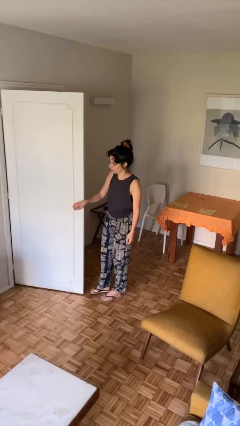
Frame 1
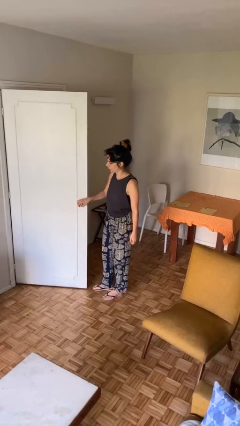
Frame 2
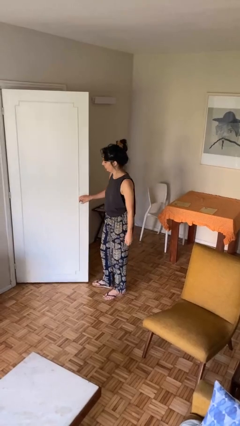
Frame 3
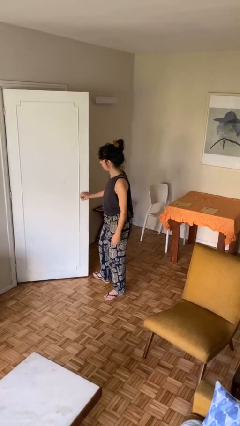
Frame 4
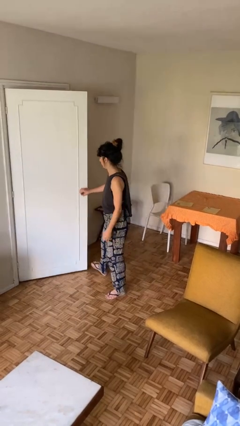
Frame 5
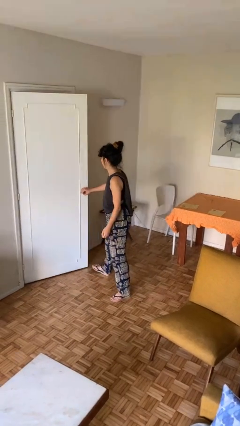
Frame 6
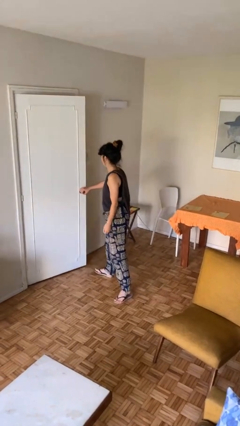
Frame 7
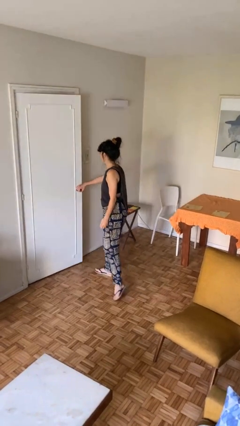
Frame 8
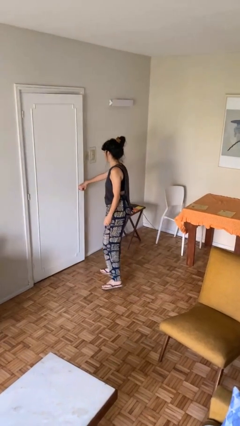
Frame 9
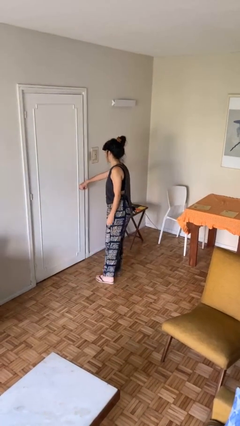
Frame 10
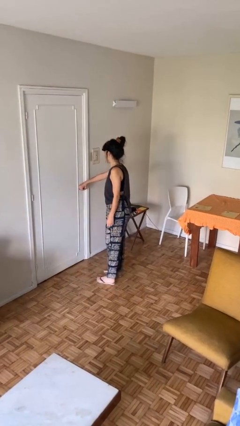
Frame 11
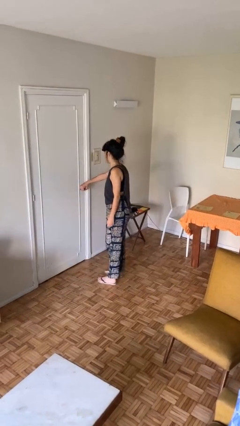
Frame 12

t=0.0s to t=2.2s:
person closes facility door

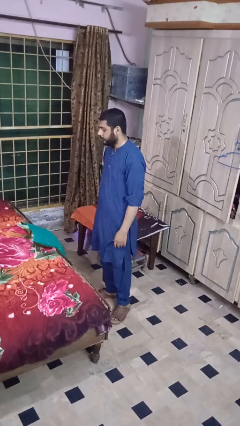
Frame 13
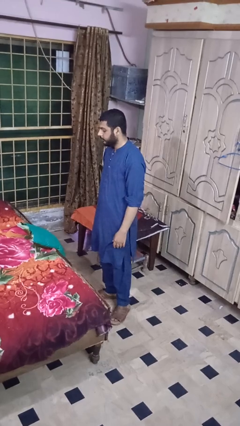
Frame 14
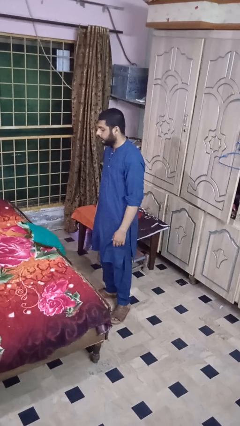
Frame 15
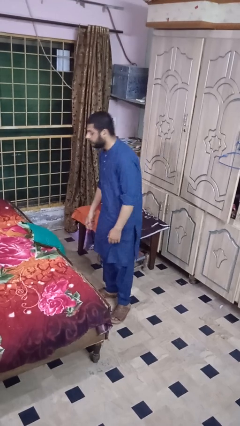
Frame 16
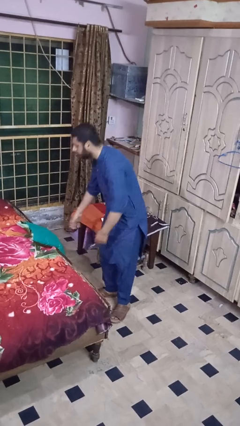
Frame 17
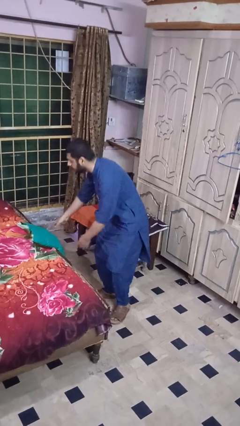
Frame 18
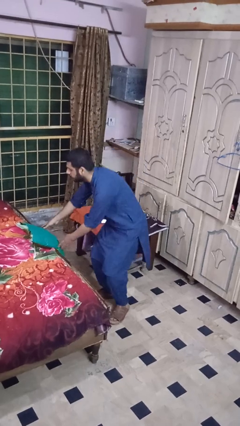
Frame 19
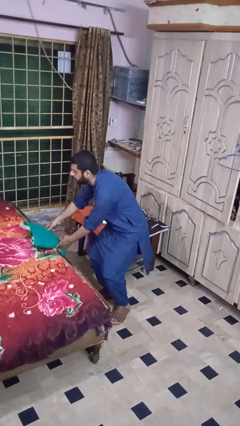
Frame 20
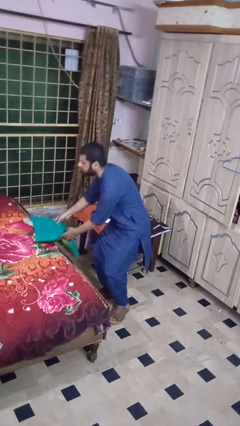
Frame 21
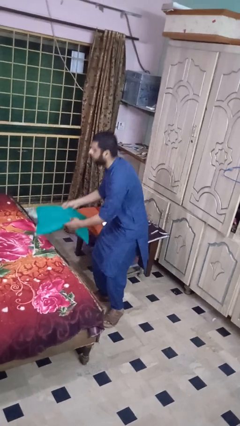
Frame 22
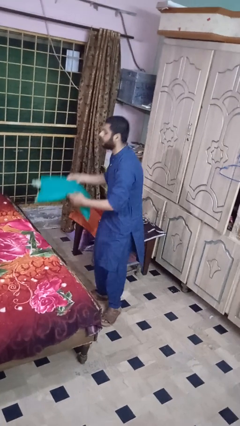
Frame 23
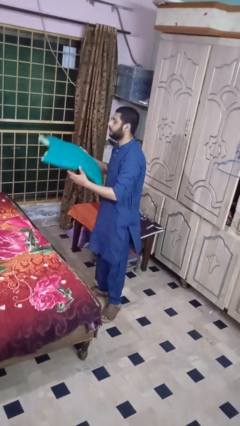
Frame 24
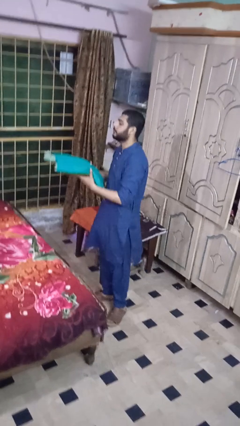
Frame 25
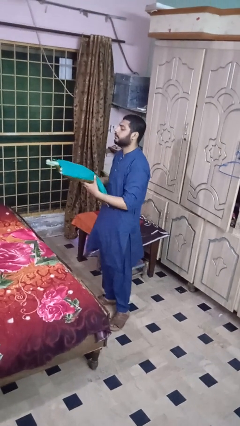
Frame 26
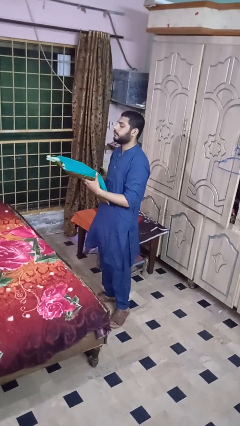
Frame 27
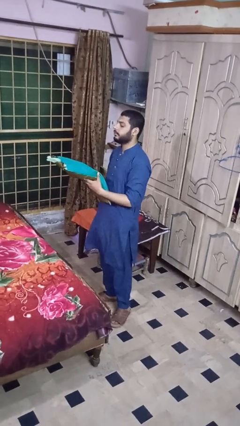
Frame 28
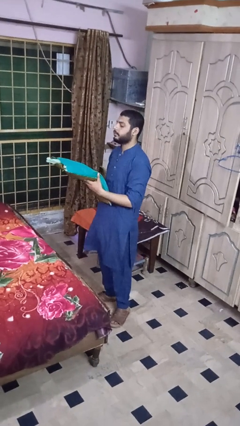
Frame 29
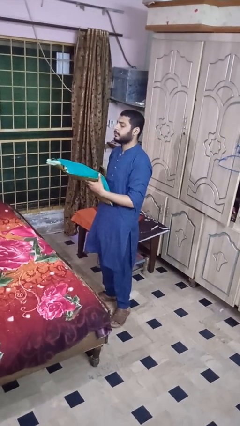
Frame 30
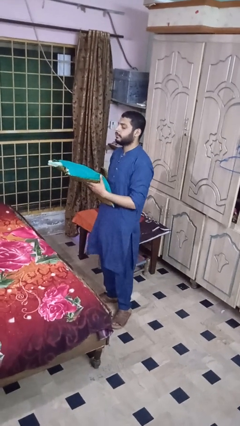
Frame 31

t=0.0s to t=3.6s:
person picks up object from bed

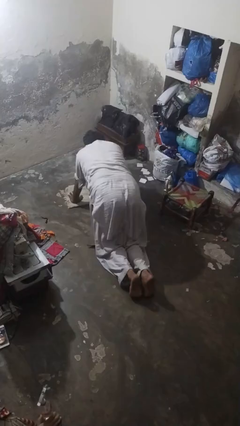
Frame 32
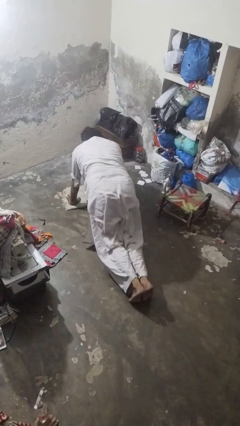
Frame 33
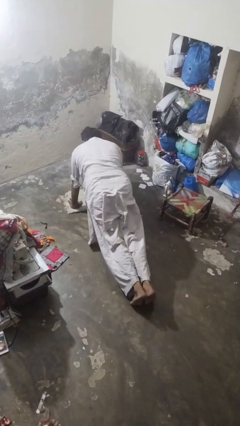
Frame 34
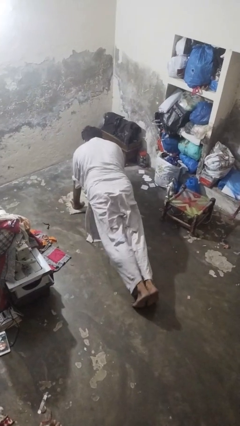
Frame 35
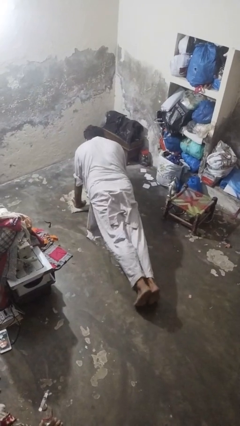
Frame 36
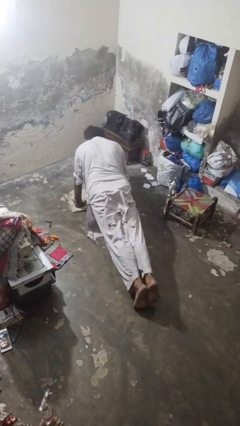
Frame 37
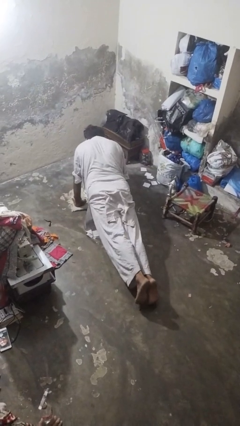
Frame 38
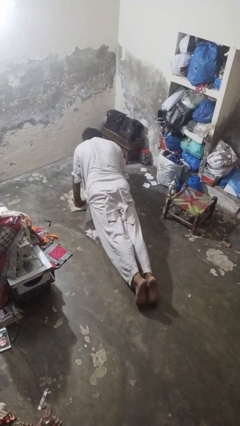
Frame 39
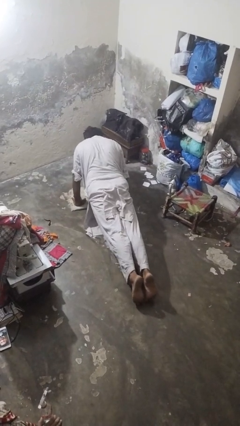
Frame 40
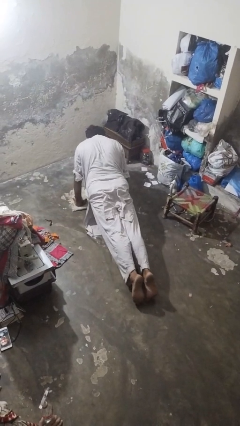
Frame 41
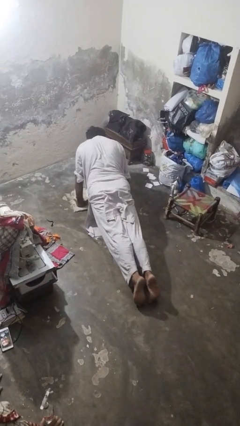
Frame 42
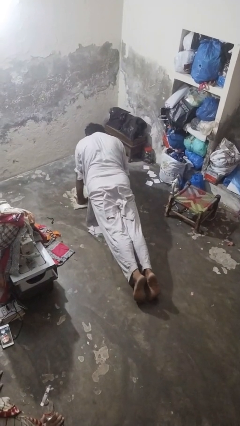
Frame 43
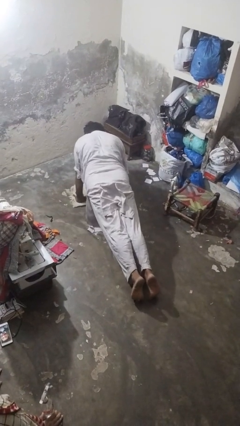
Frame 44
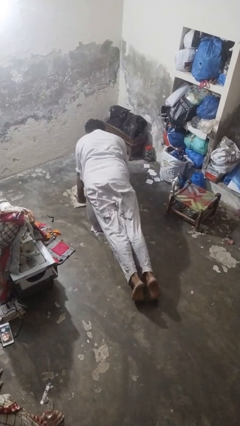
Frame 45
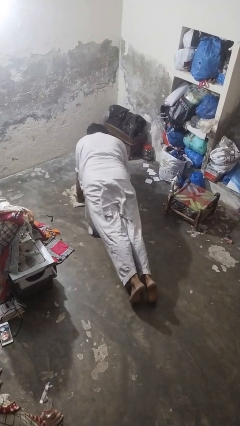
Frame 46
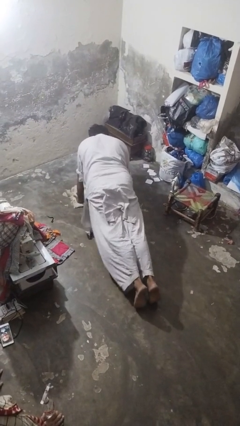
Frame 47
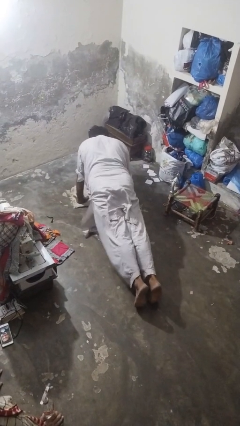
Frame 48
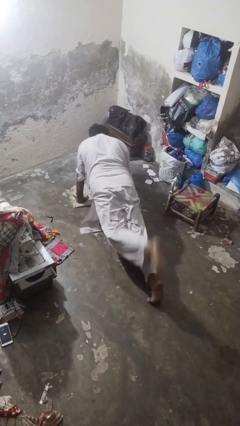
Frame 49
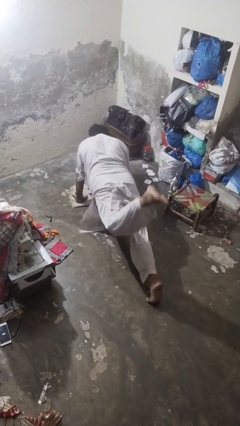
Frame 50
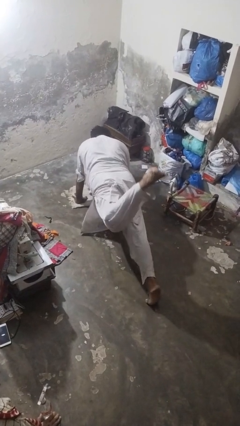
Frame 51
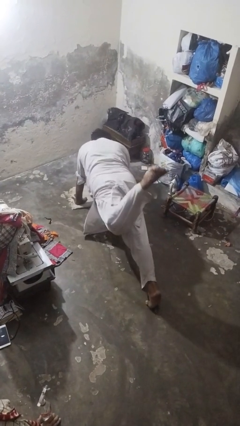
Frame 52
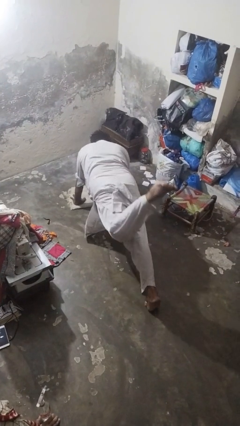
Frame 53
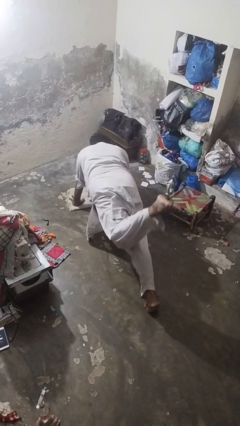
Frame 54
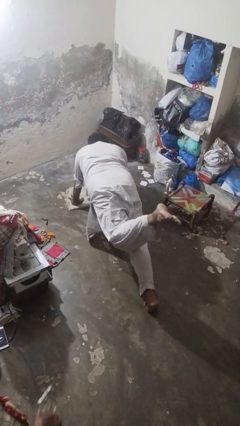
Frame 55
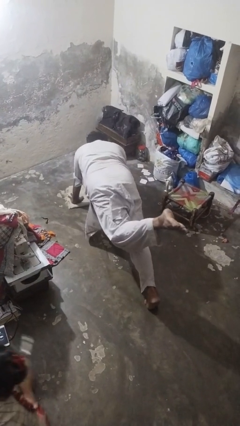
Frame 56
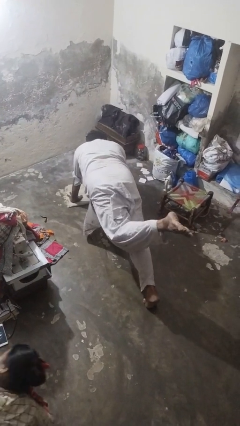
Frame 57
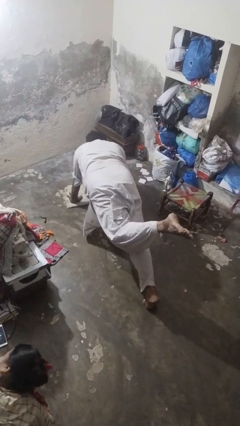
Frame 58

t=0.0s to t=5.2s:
person handstand

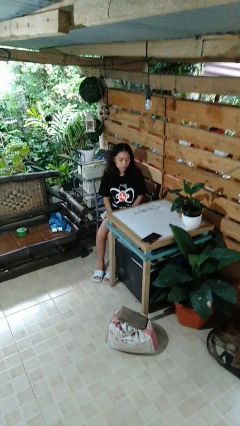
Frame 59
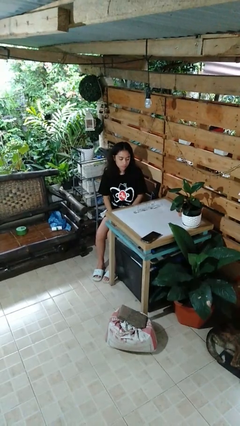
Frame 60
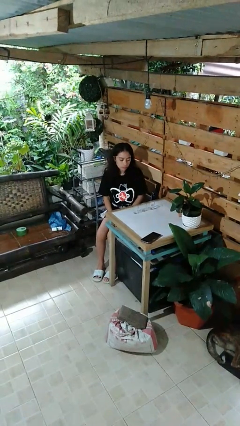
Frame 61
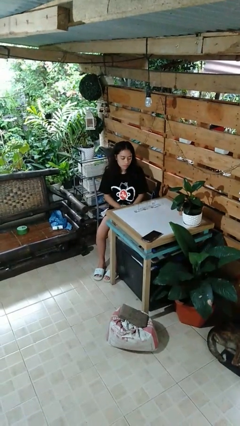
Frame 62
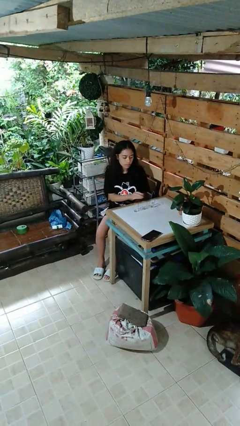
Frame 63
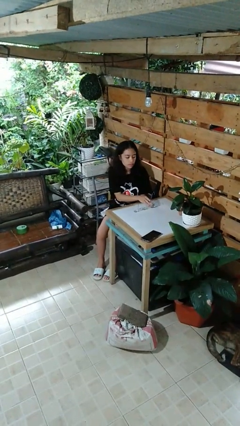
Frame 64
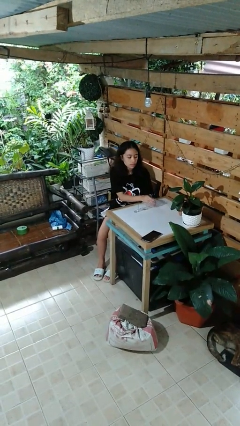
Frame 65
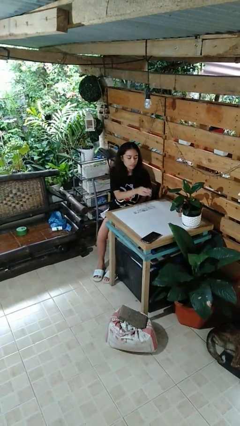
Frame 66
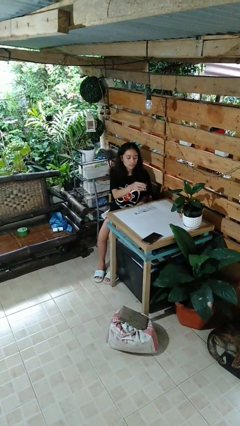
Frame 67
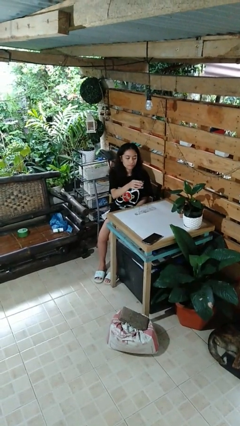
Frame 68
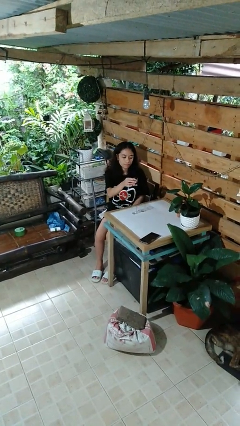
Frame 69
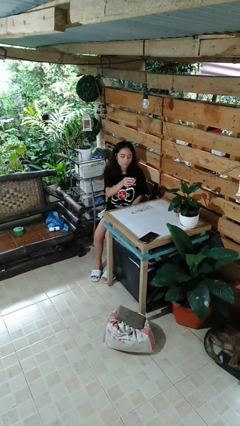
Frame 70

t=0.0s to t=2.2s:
person picks up object from table

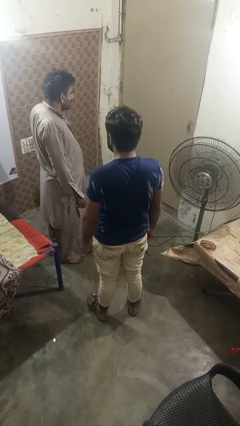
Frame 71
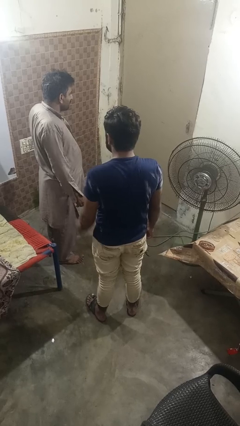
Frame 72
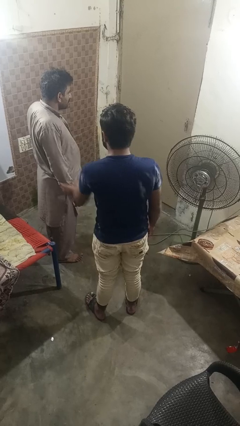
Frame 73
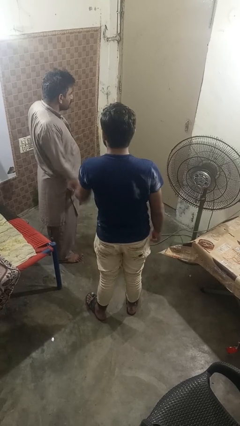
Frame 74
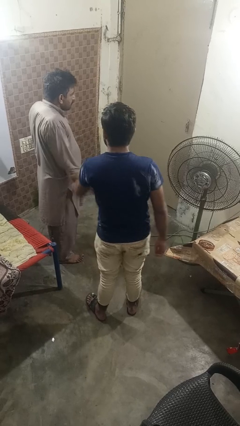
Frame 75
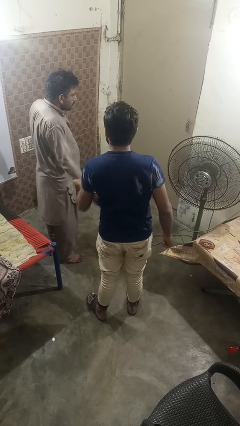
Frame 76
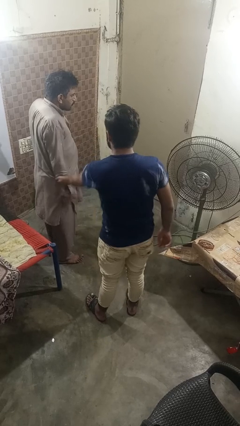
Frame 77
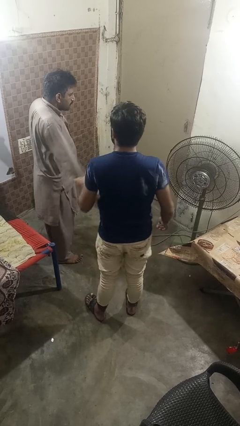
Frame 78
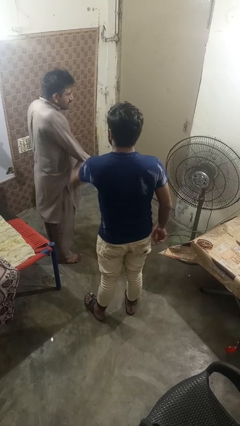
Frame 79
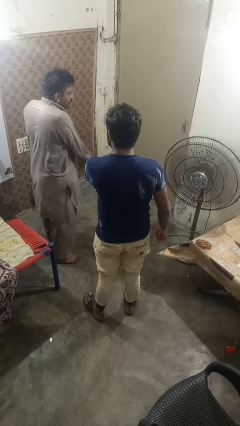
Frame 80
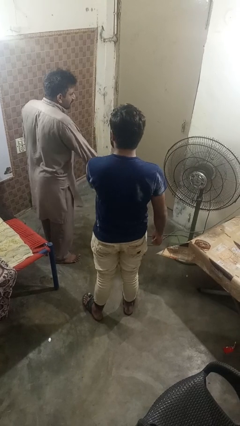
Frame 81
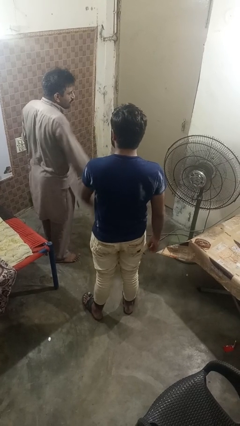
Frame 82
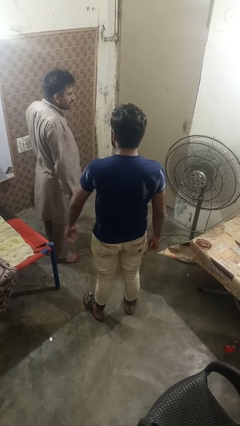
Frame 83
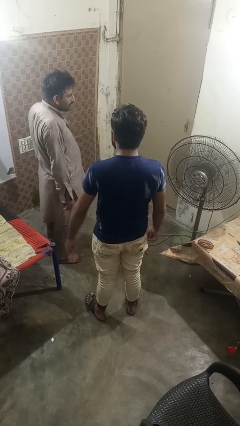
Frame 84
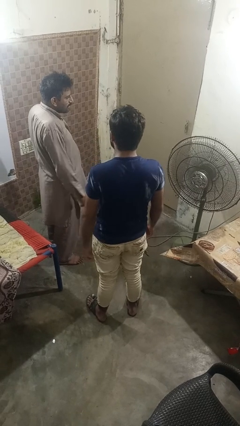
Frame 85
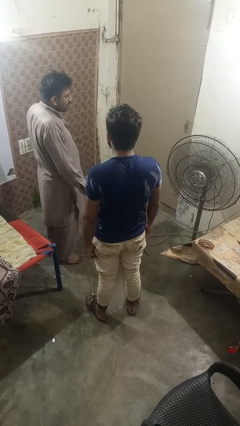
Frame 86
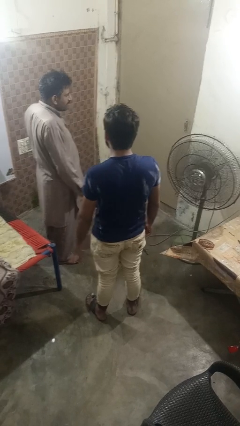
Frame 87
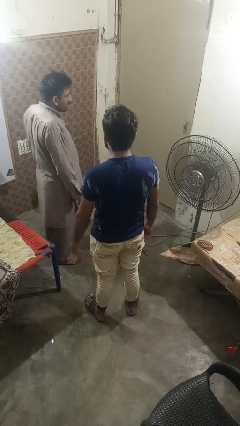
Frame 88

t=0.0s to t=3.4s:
person grabs person by forearm

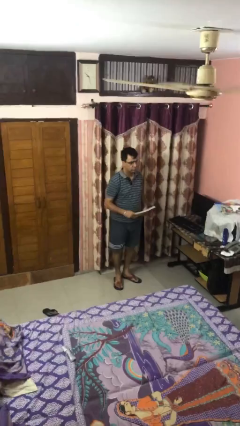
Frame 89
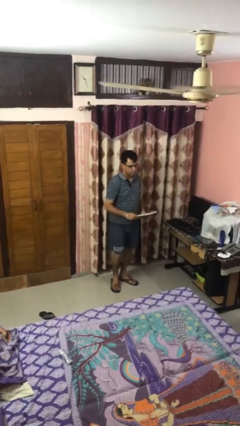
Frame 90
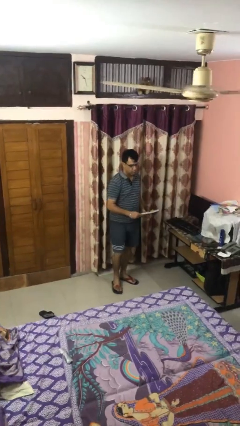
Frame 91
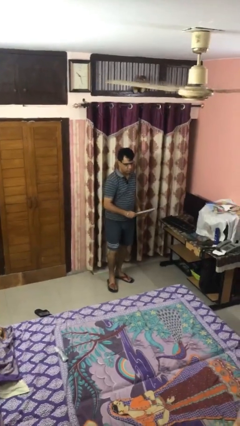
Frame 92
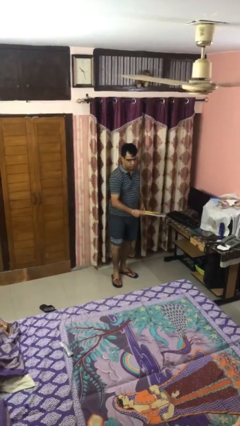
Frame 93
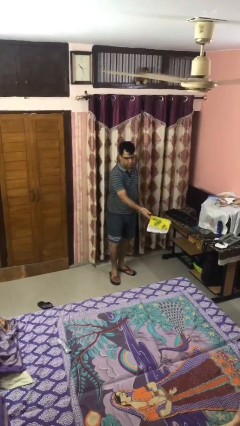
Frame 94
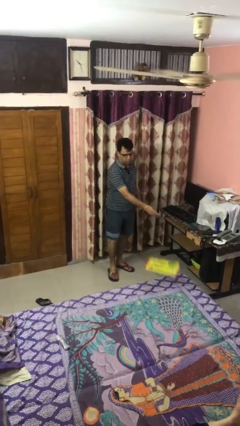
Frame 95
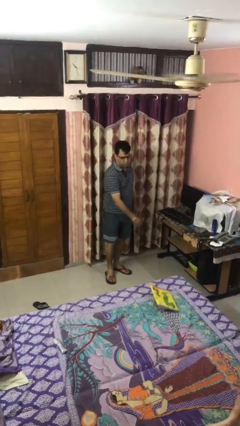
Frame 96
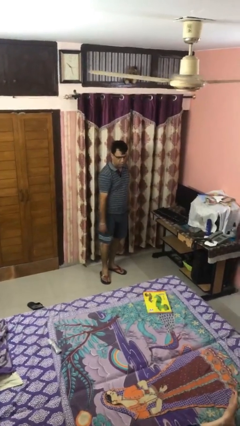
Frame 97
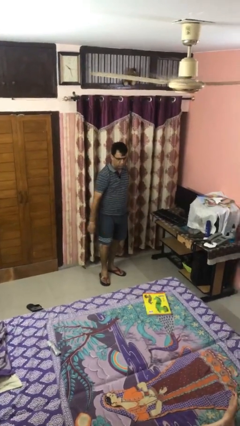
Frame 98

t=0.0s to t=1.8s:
person throws object on bed
